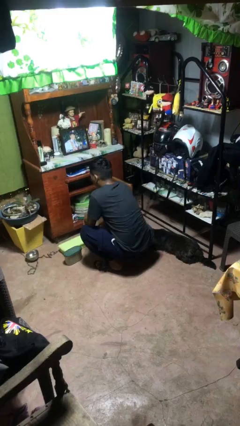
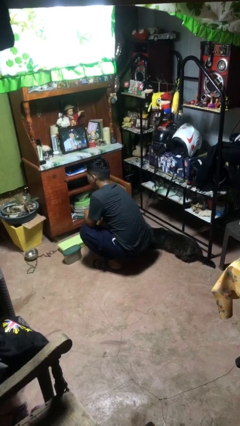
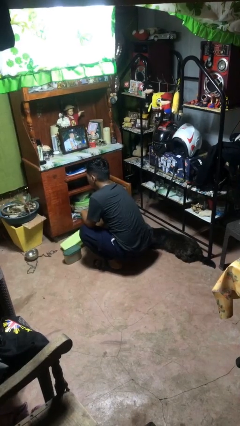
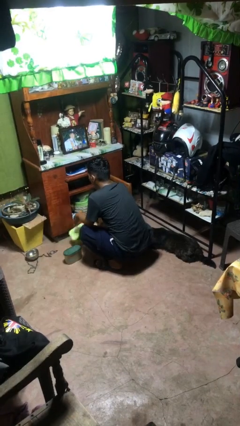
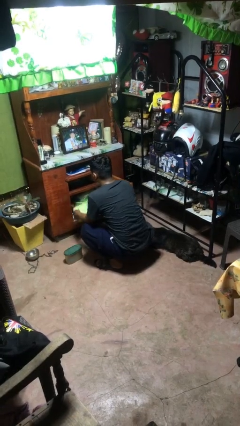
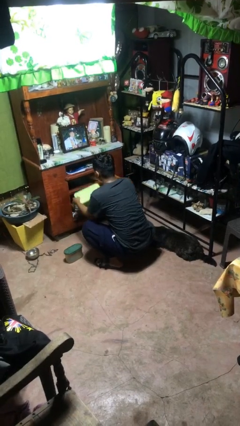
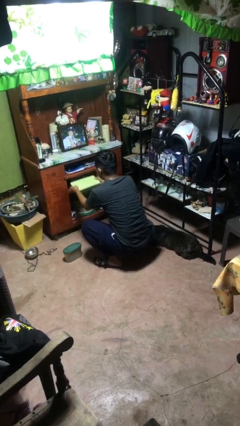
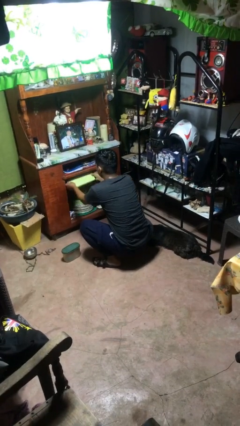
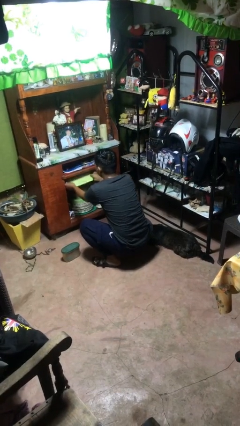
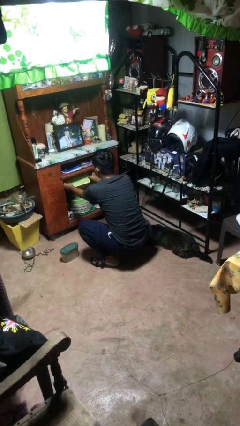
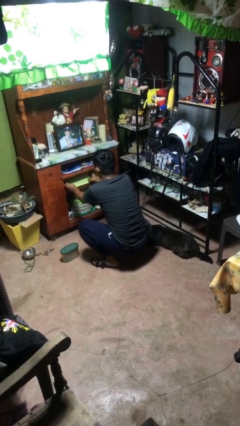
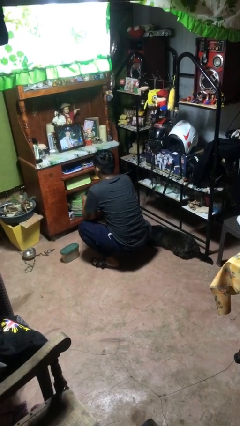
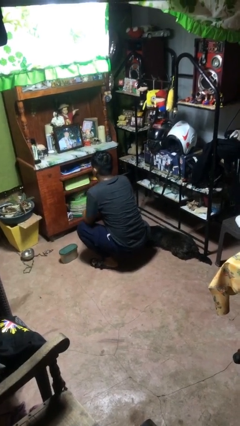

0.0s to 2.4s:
person puts object in cabinet

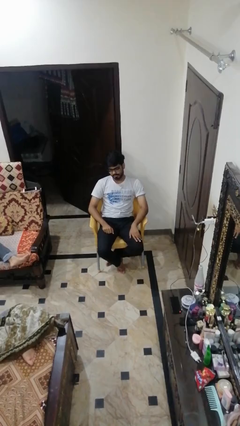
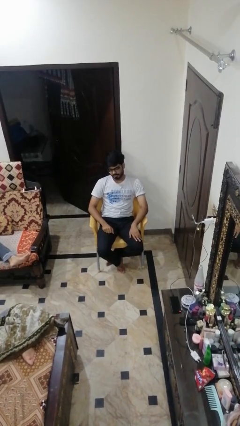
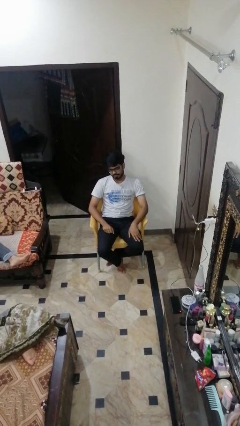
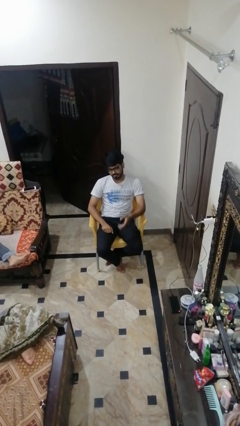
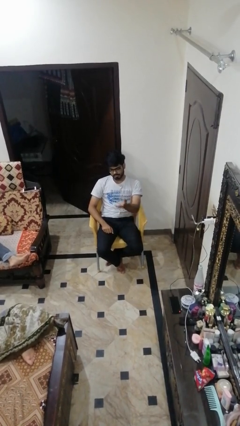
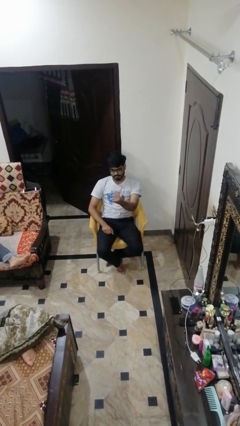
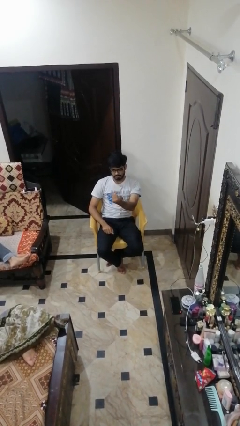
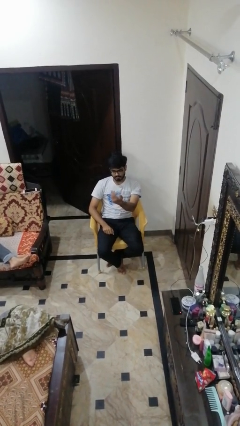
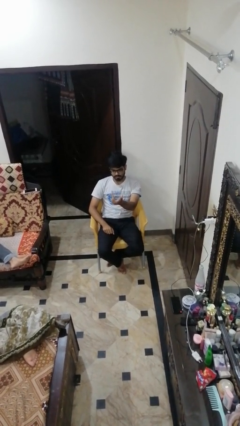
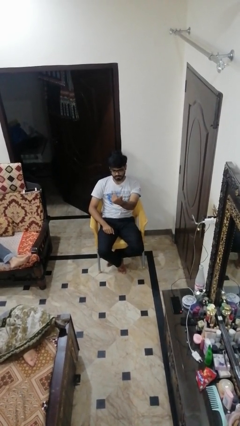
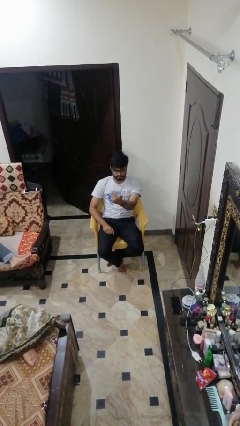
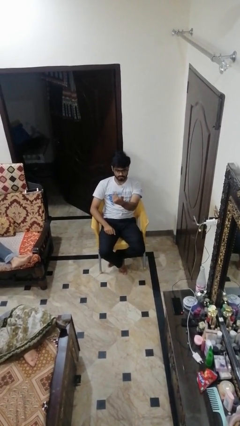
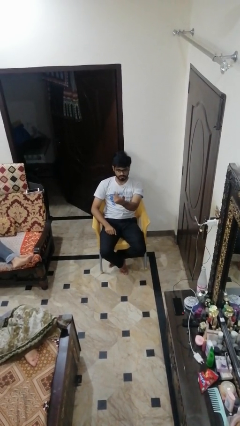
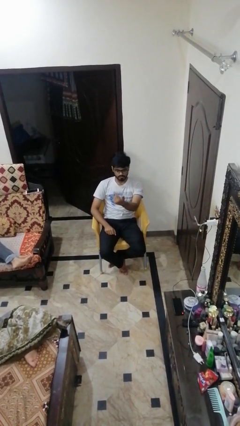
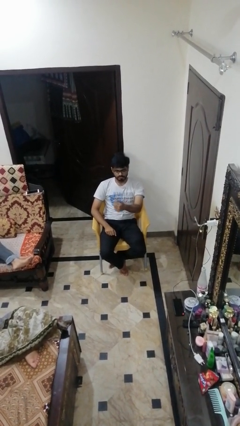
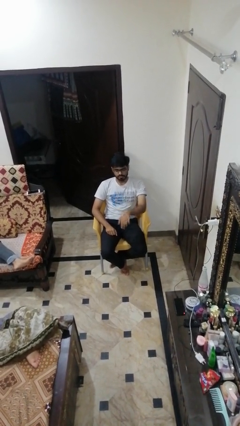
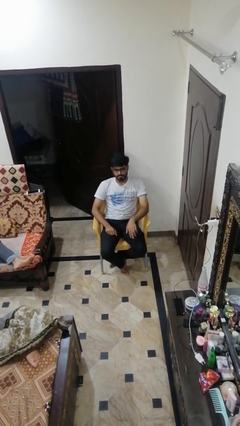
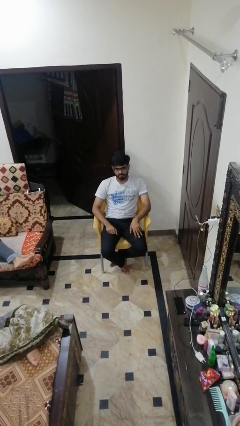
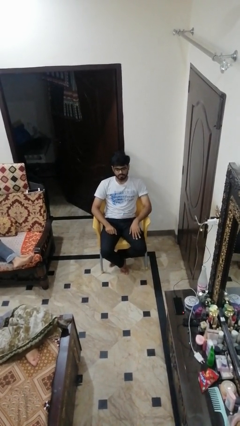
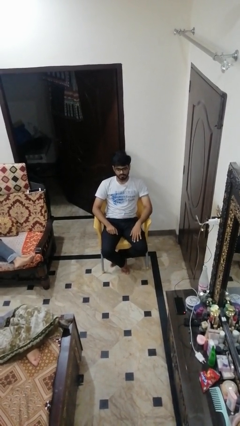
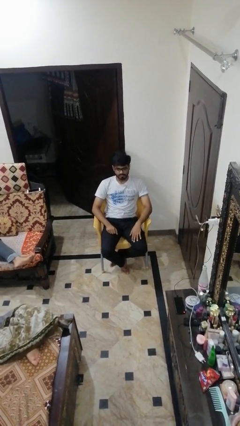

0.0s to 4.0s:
person gestures come here

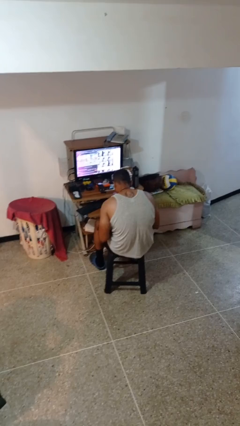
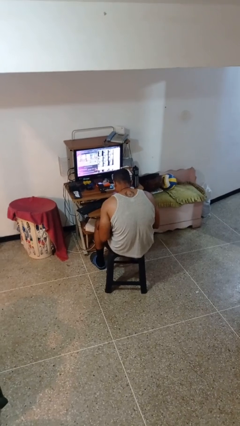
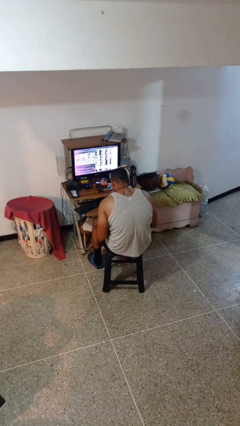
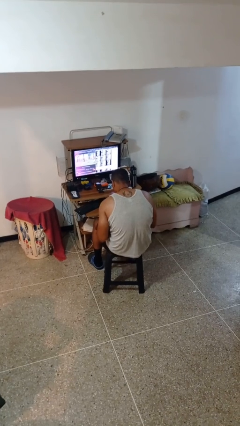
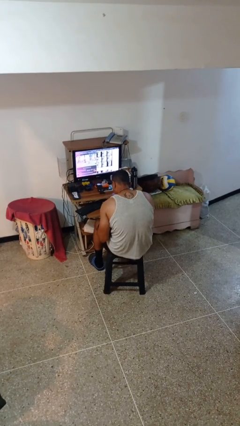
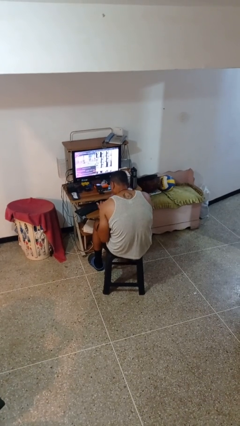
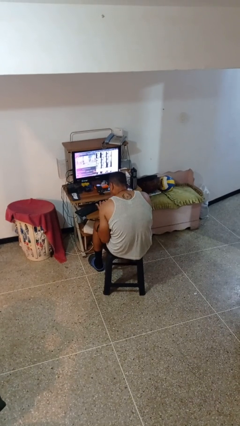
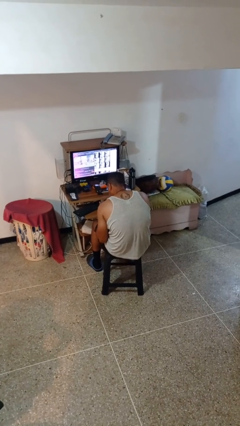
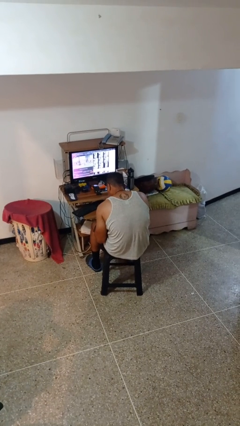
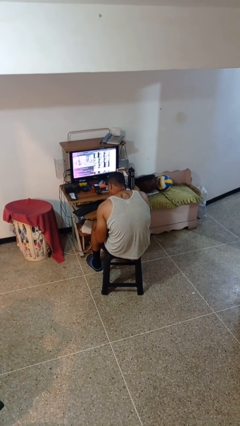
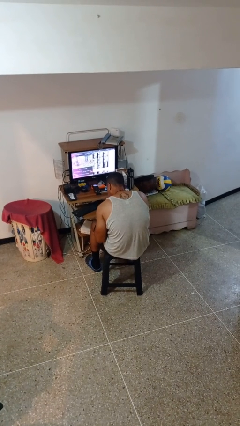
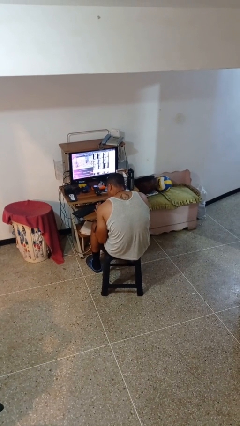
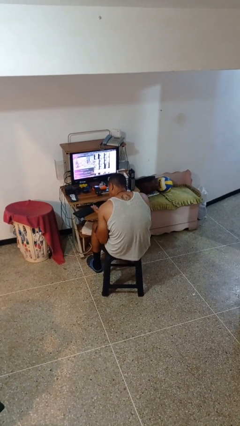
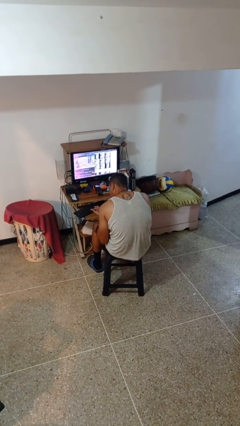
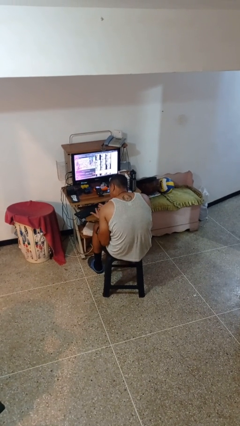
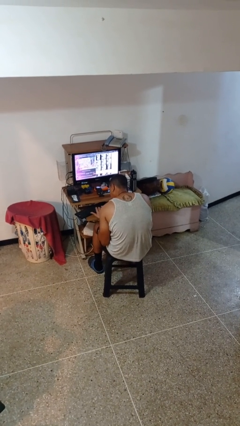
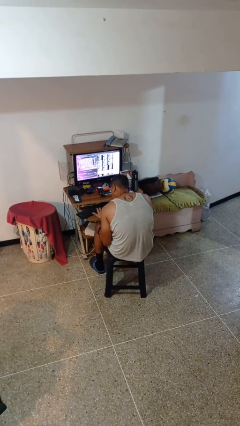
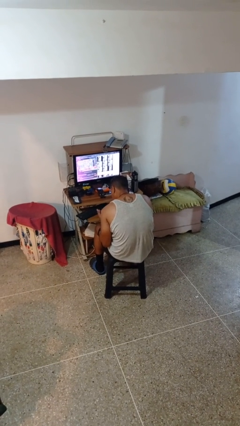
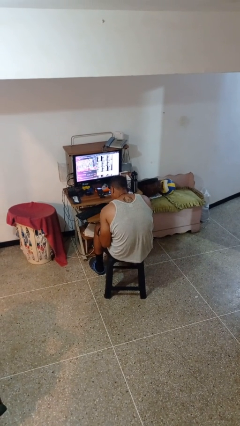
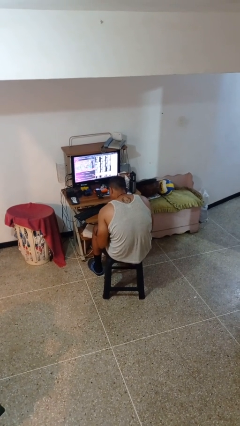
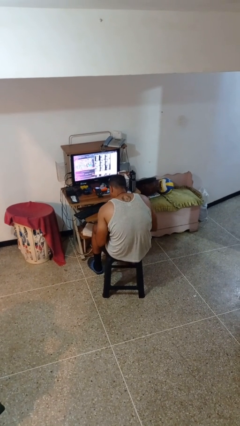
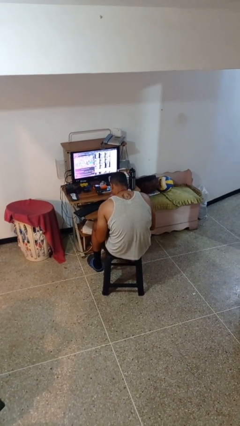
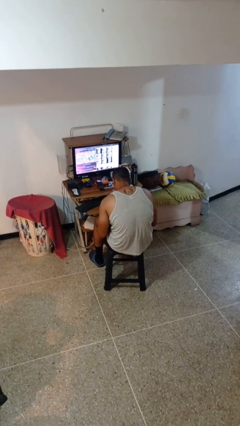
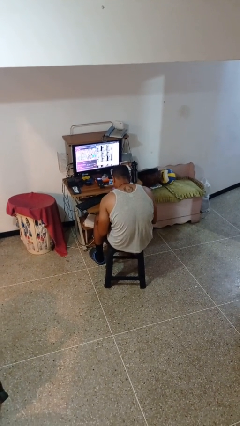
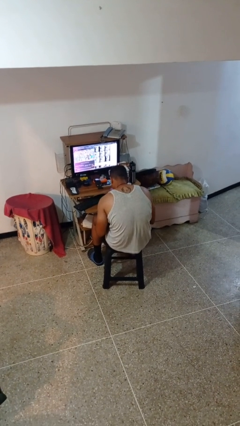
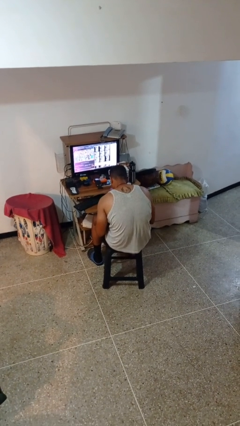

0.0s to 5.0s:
person looks at hands in lap

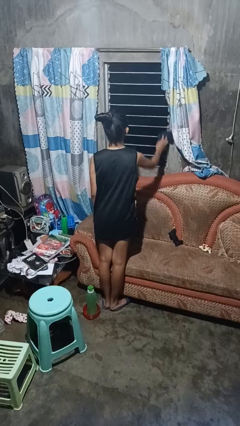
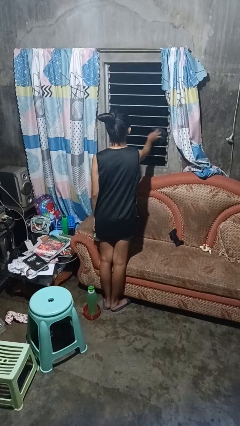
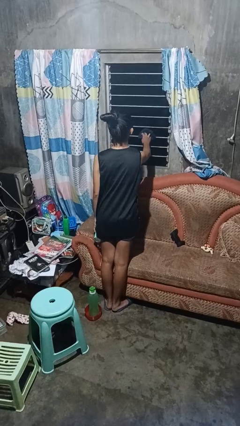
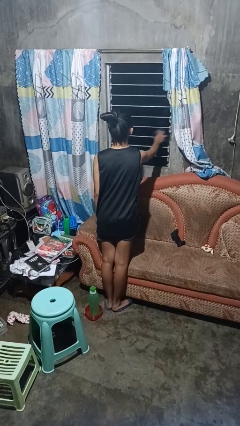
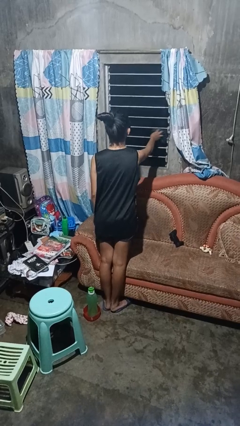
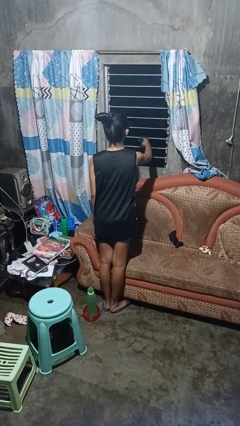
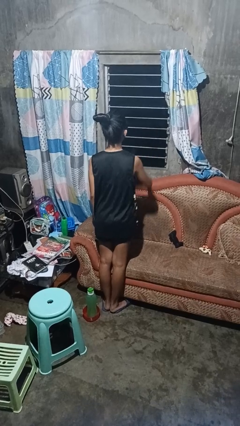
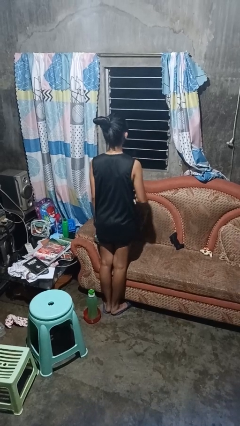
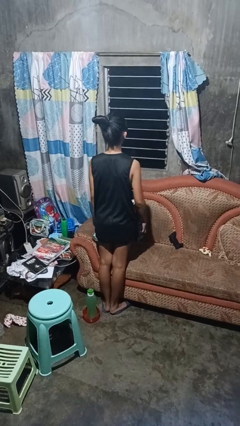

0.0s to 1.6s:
person washes window

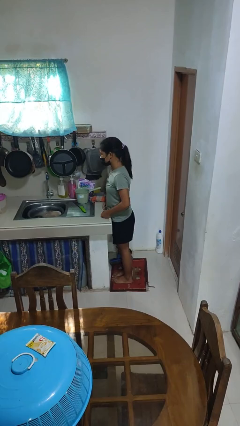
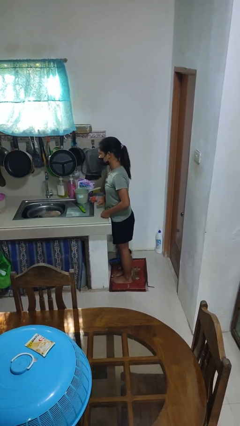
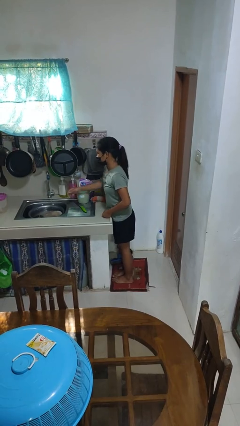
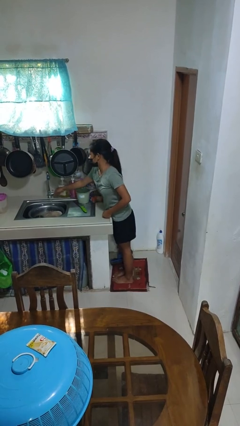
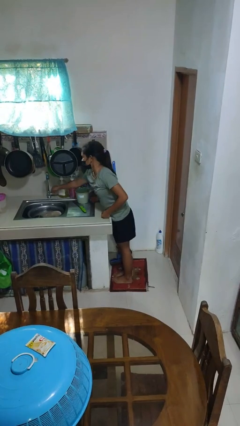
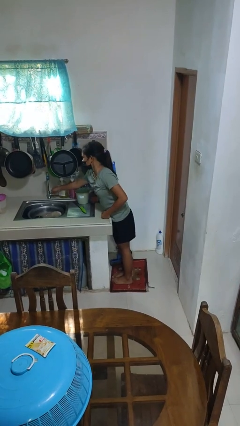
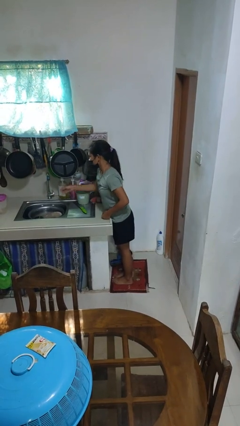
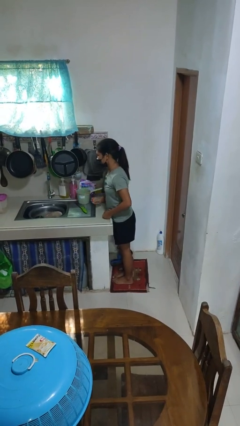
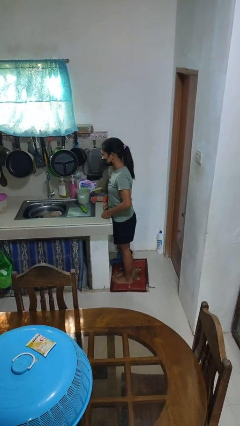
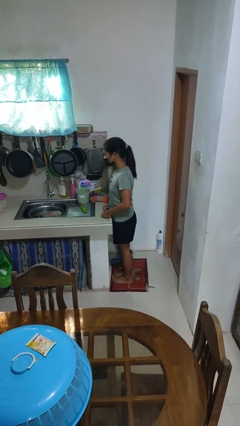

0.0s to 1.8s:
person turns off faucet

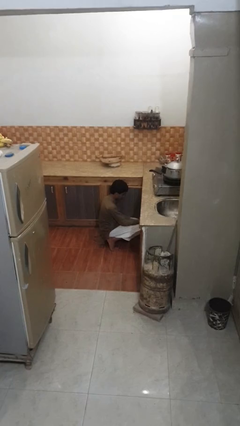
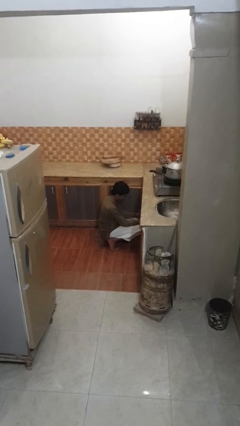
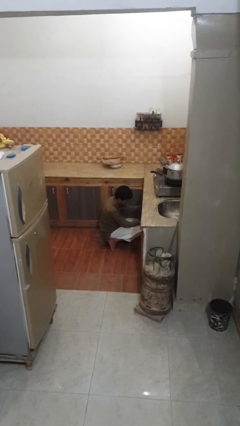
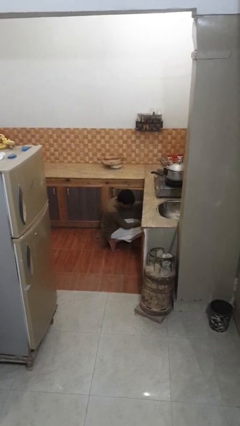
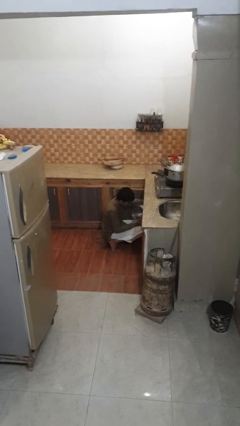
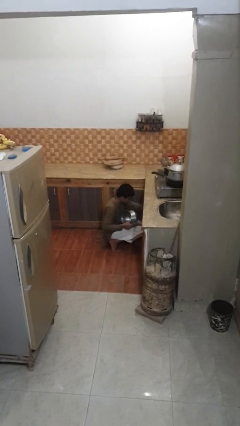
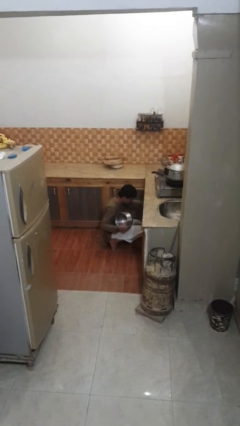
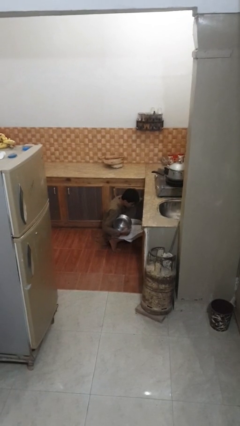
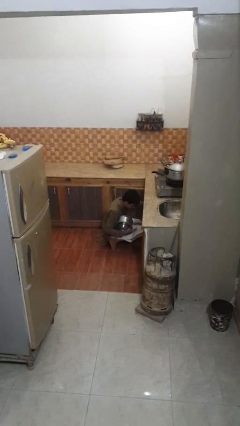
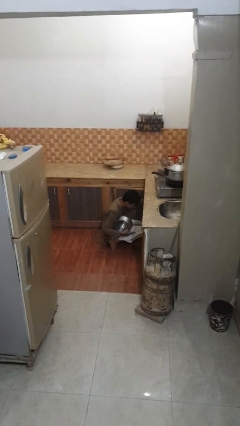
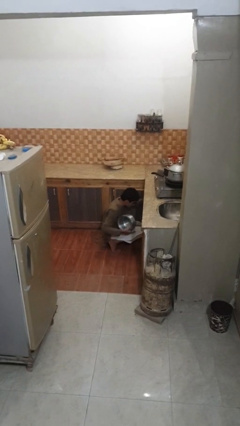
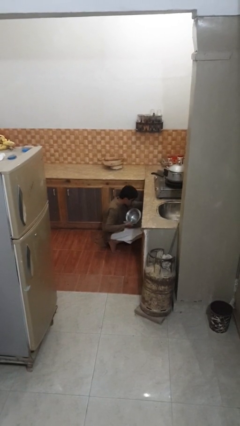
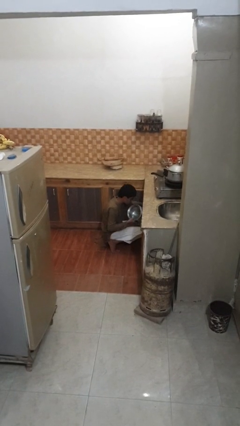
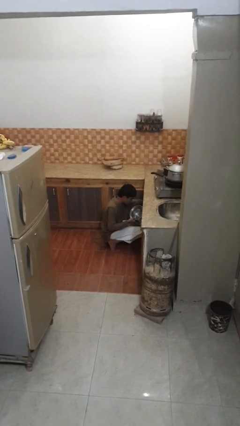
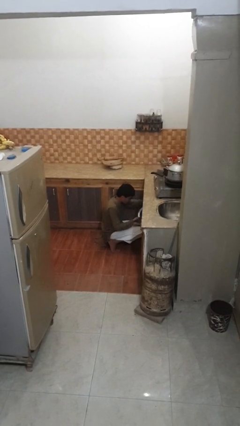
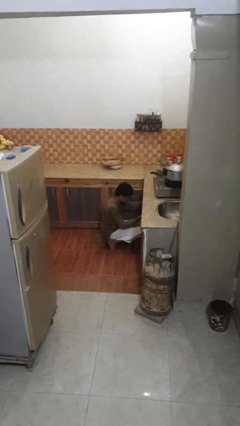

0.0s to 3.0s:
person searches in kitchen drawer
